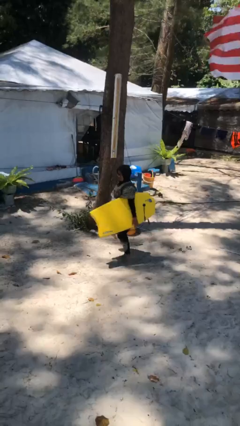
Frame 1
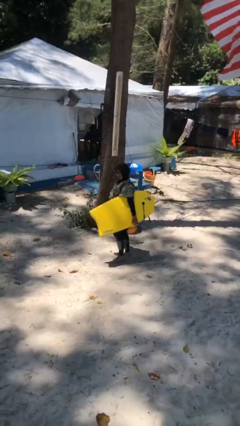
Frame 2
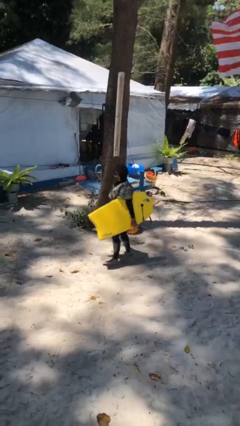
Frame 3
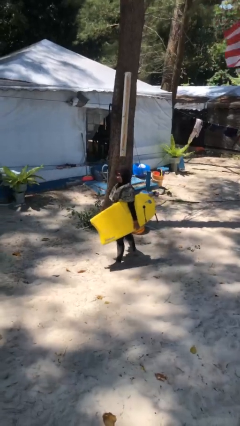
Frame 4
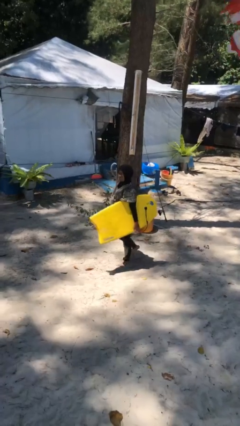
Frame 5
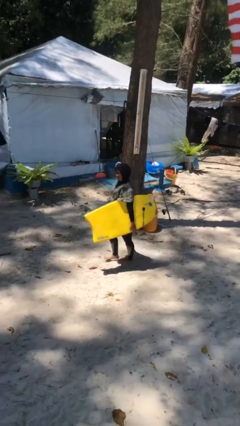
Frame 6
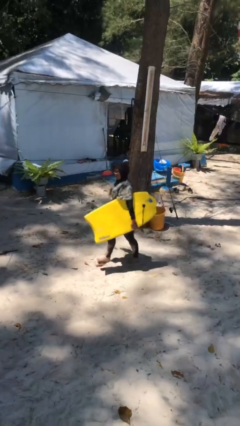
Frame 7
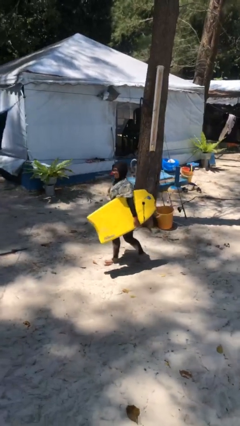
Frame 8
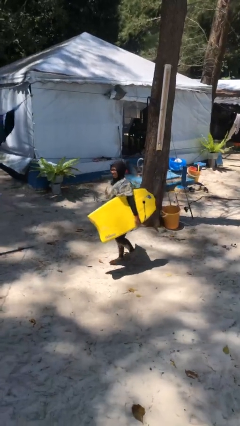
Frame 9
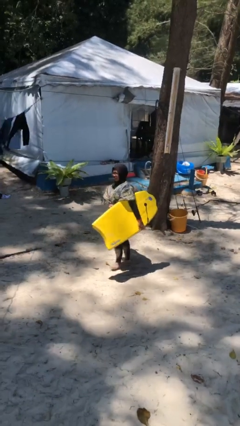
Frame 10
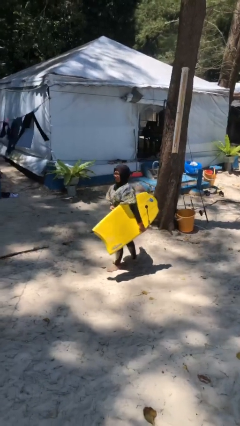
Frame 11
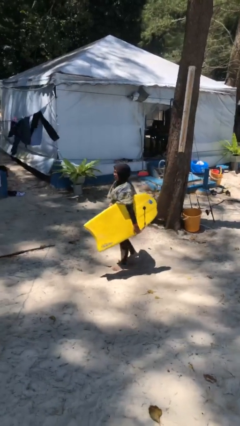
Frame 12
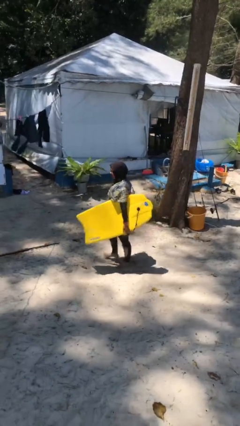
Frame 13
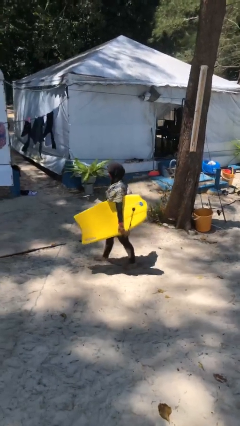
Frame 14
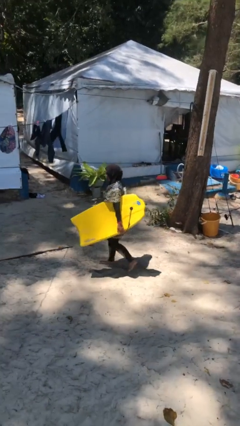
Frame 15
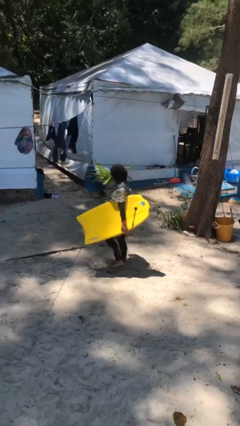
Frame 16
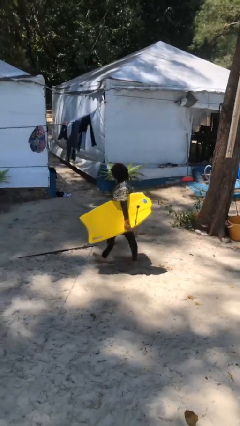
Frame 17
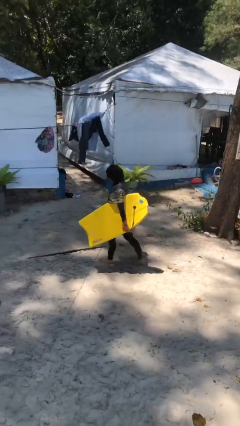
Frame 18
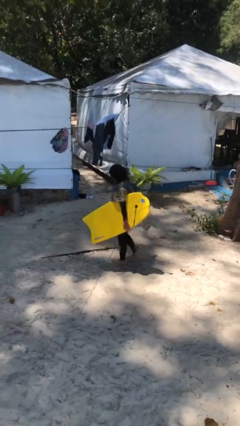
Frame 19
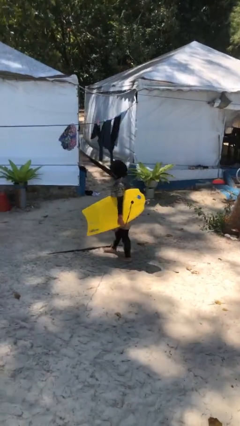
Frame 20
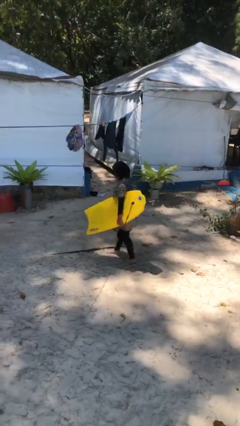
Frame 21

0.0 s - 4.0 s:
person carries heavy object

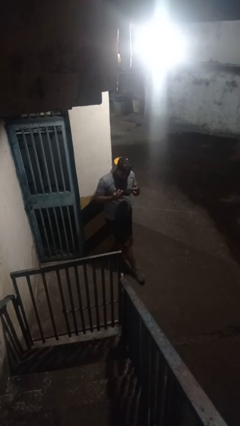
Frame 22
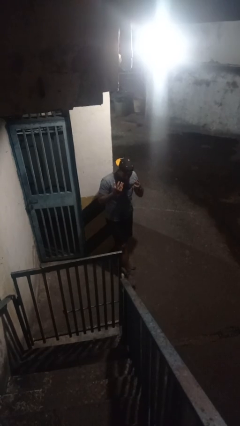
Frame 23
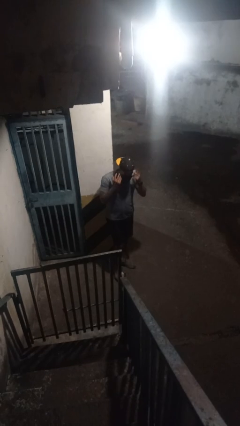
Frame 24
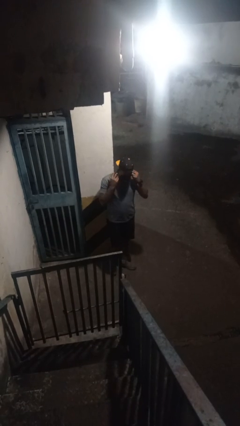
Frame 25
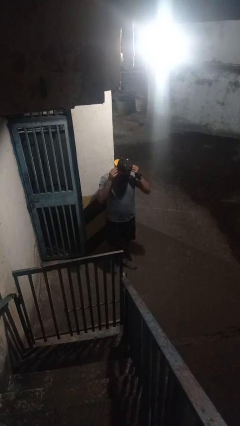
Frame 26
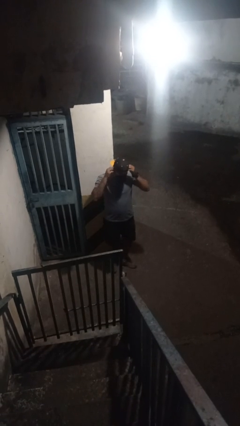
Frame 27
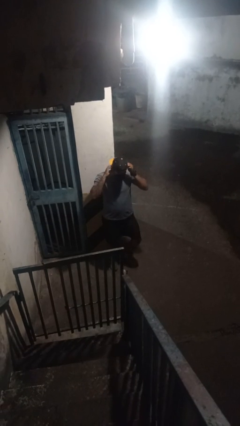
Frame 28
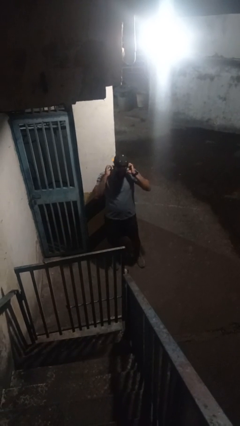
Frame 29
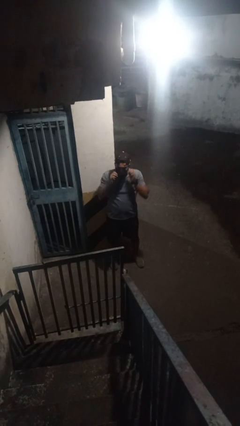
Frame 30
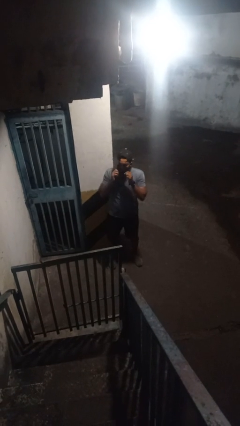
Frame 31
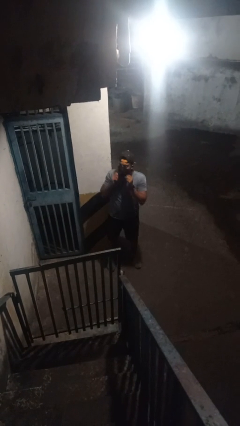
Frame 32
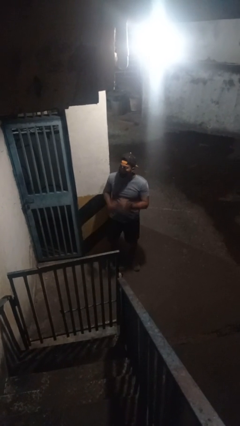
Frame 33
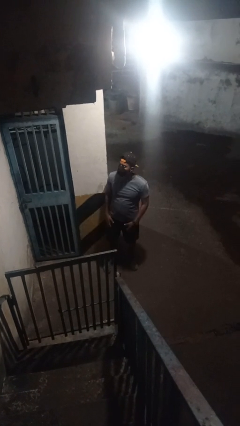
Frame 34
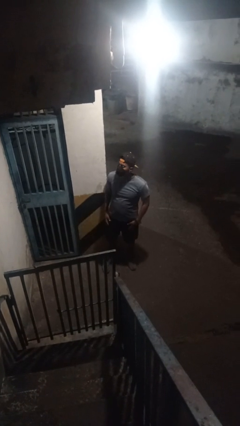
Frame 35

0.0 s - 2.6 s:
person puts on facemask

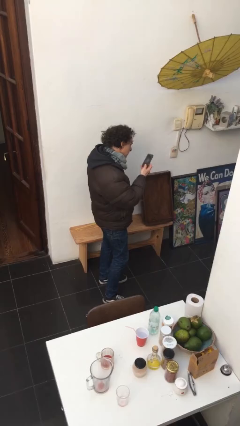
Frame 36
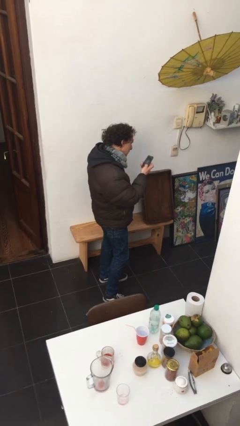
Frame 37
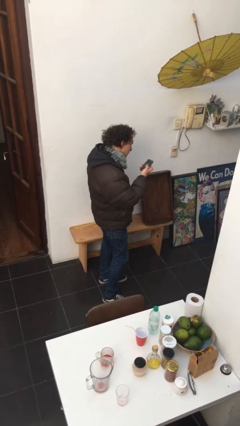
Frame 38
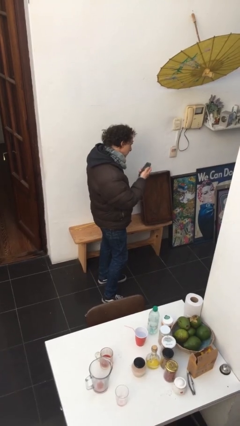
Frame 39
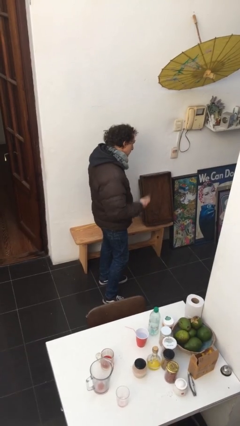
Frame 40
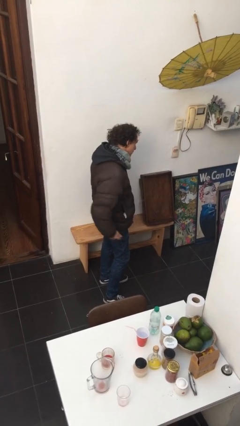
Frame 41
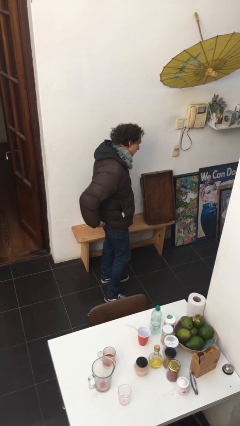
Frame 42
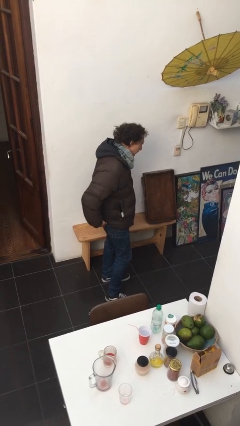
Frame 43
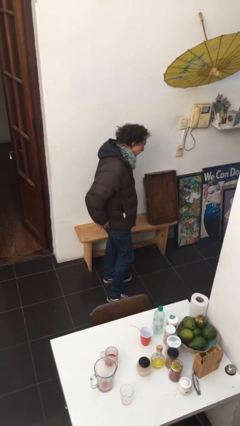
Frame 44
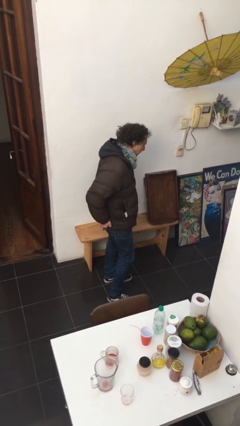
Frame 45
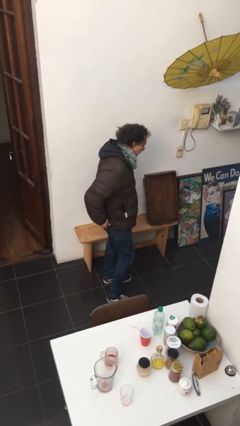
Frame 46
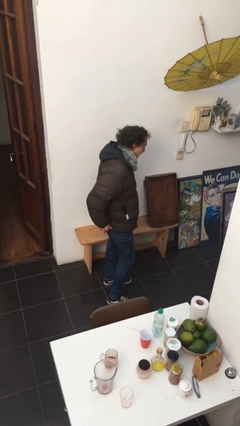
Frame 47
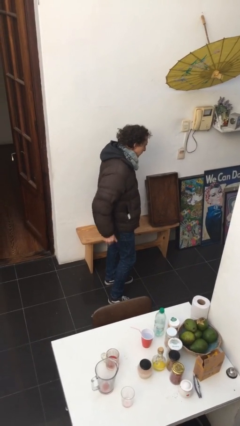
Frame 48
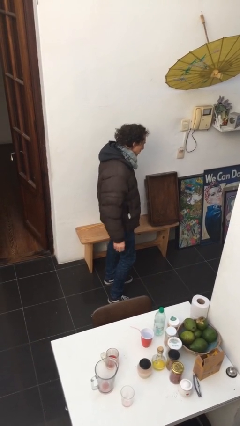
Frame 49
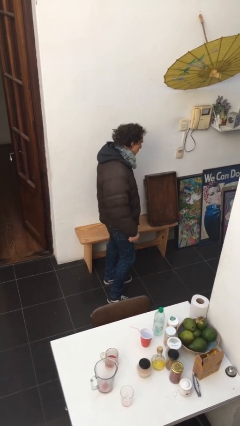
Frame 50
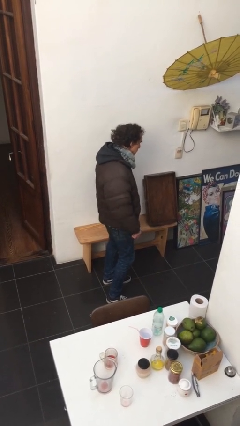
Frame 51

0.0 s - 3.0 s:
person puts phone into pocket

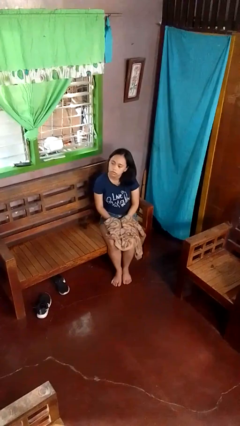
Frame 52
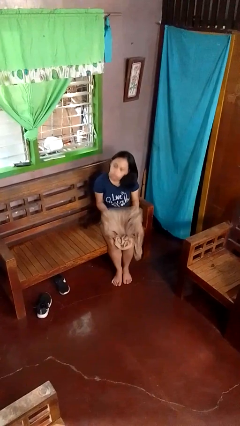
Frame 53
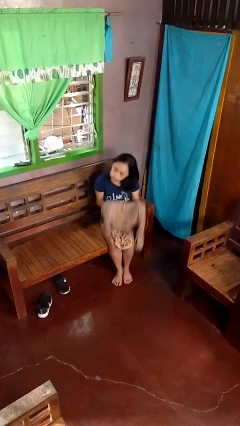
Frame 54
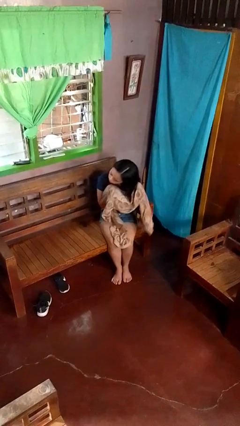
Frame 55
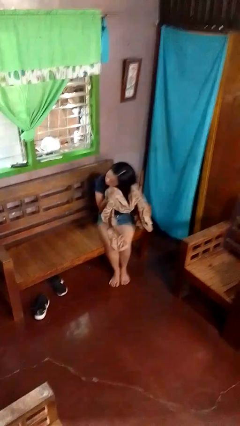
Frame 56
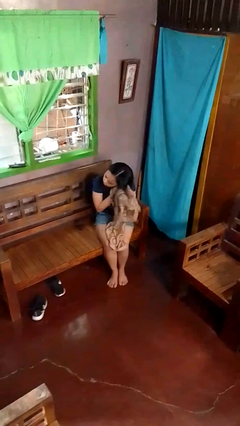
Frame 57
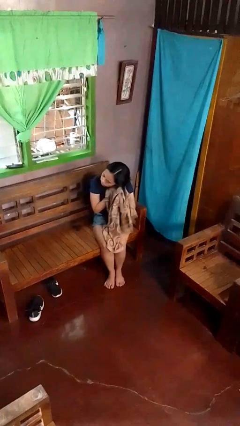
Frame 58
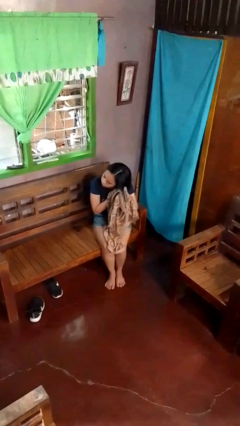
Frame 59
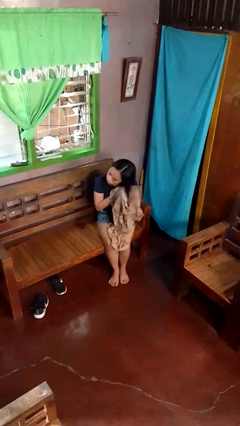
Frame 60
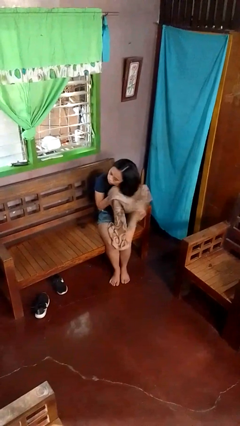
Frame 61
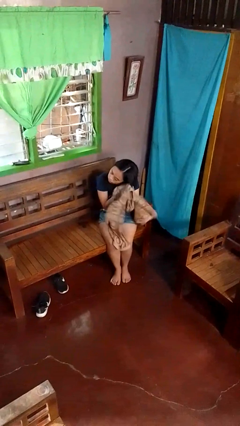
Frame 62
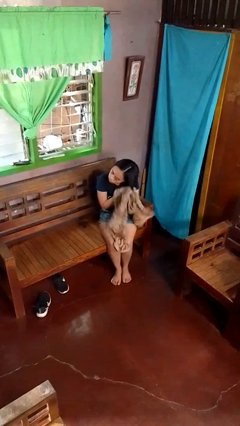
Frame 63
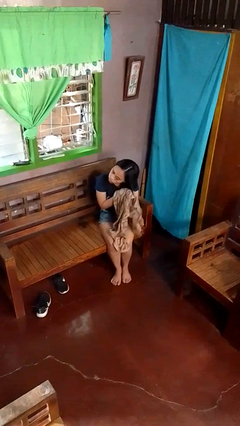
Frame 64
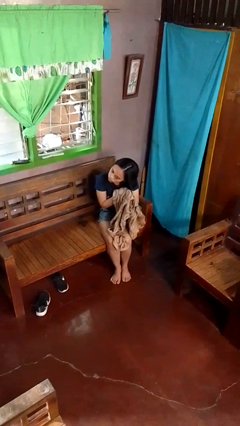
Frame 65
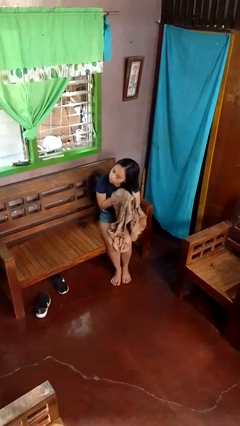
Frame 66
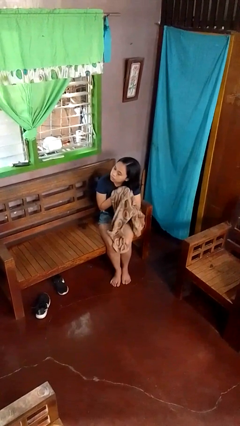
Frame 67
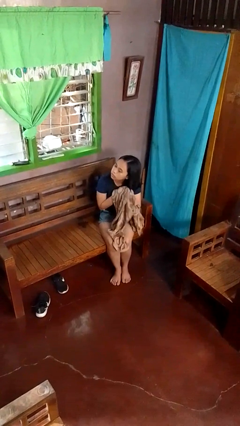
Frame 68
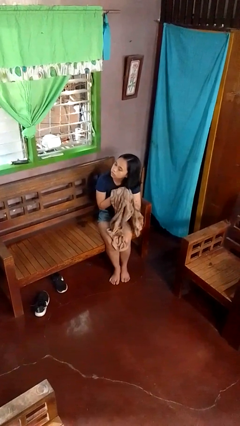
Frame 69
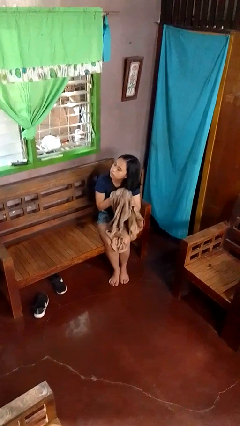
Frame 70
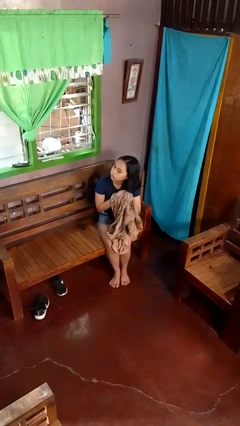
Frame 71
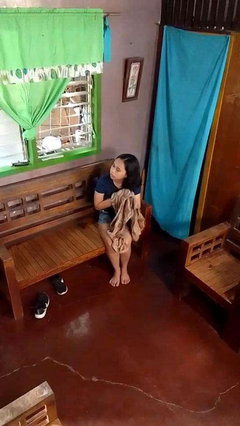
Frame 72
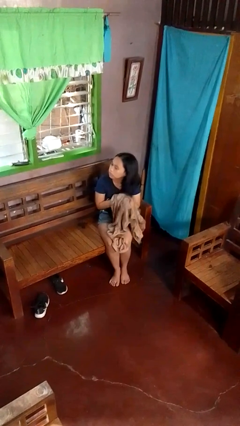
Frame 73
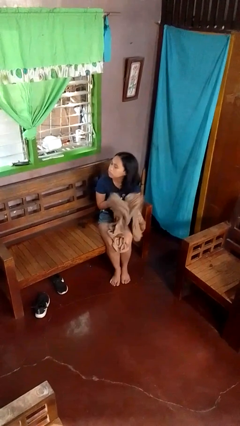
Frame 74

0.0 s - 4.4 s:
person dries hair with towel

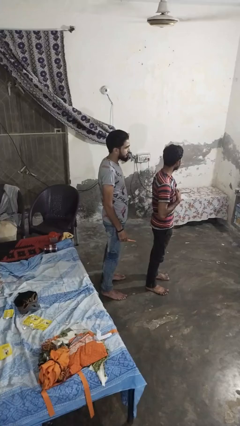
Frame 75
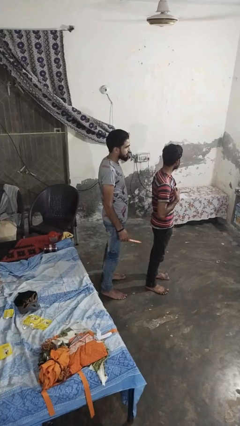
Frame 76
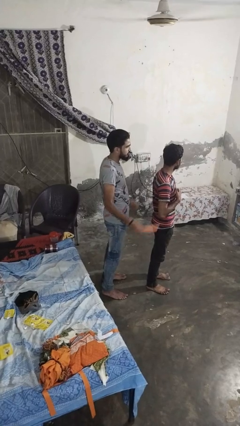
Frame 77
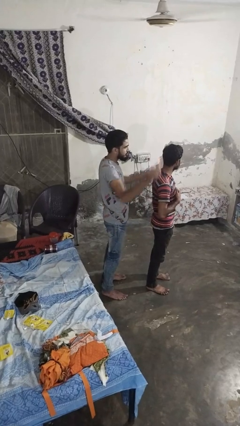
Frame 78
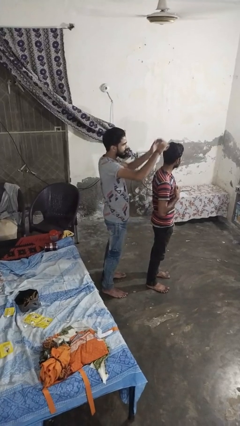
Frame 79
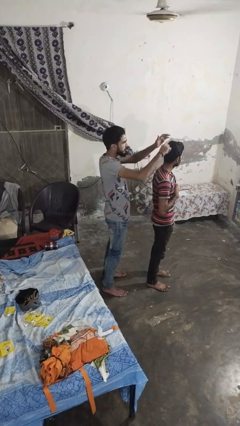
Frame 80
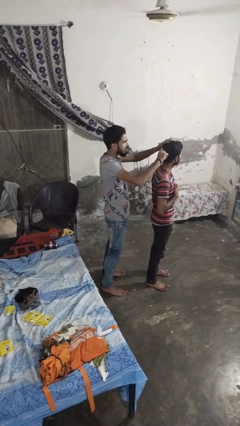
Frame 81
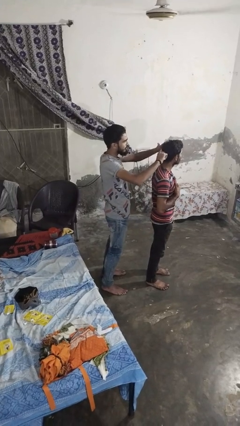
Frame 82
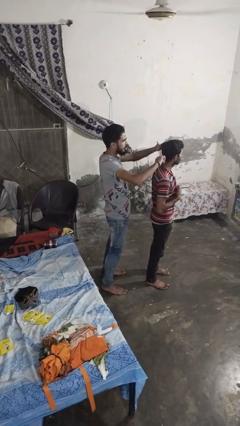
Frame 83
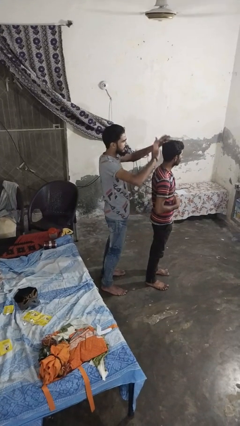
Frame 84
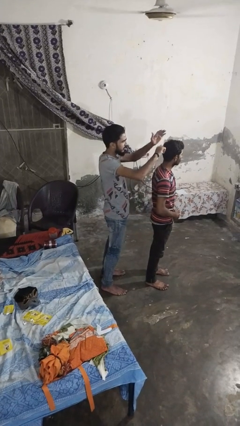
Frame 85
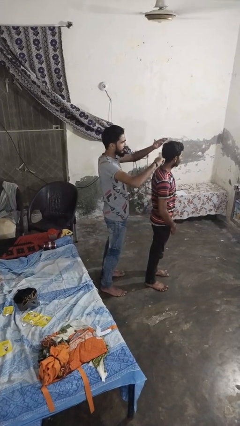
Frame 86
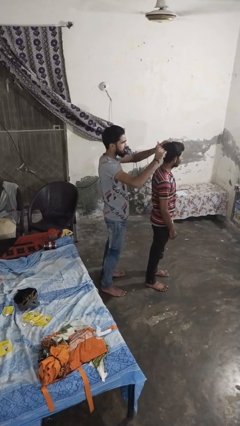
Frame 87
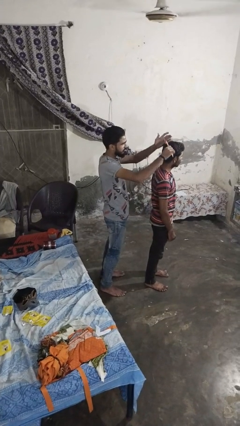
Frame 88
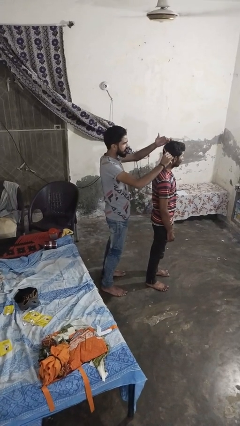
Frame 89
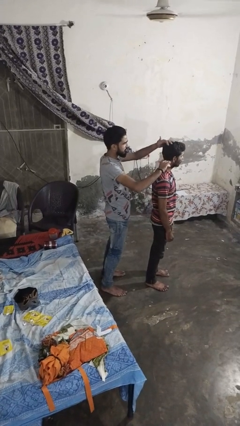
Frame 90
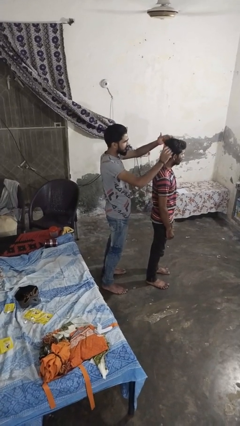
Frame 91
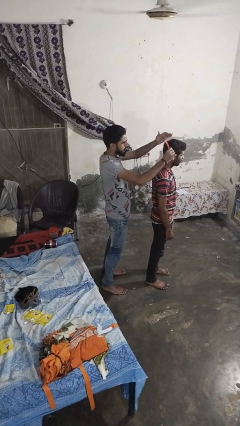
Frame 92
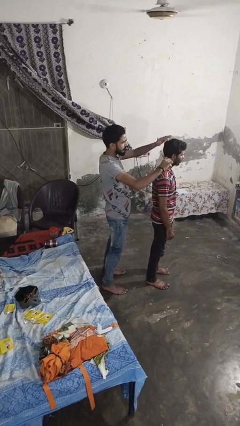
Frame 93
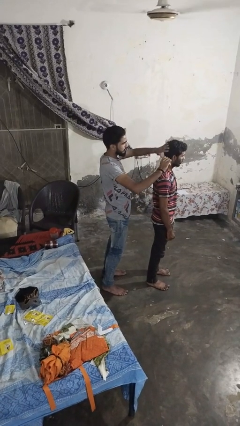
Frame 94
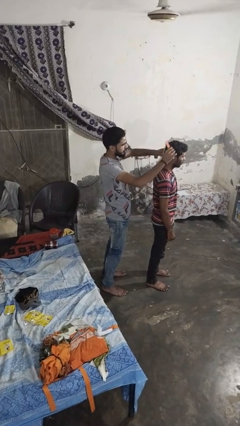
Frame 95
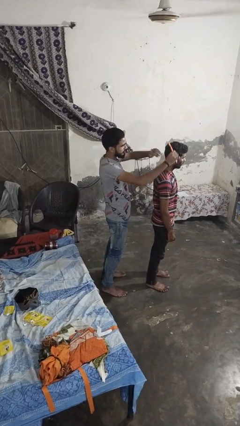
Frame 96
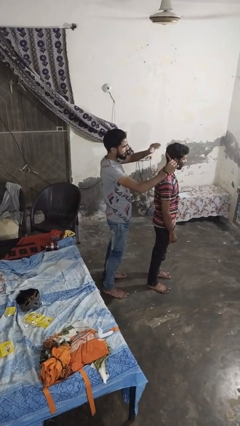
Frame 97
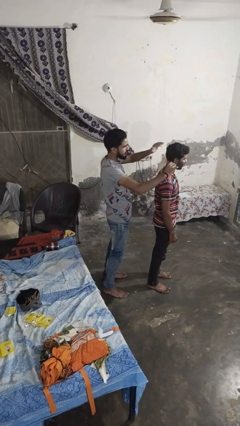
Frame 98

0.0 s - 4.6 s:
person brushes hair of person
